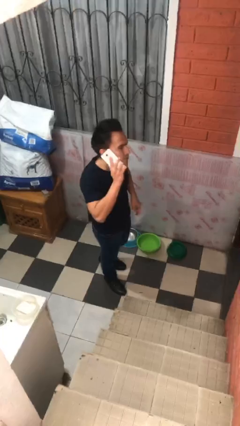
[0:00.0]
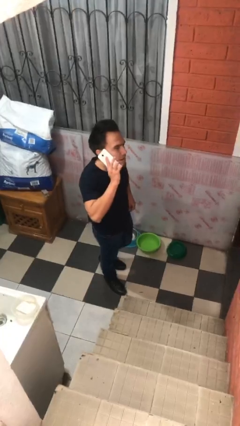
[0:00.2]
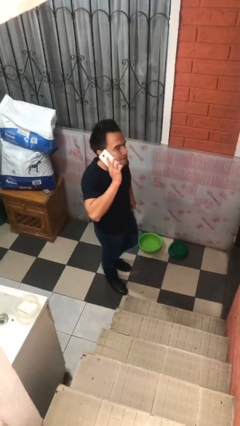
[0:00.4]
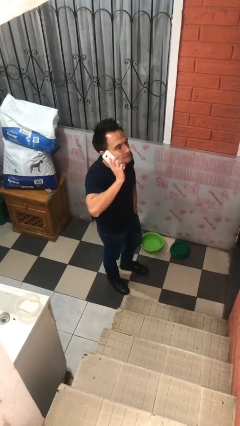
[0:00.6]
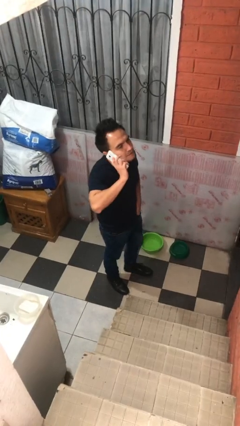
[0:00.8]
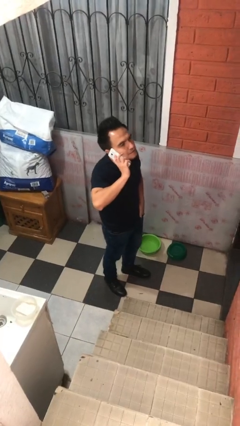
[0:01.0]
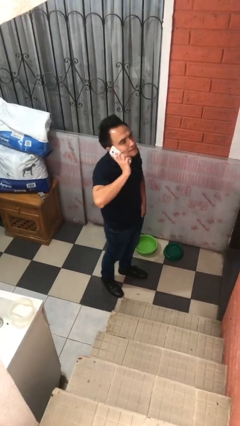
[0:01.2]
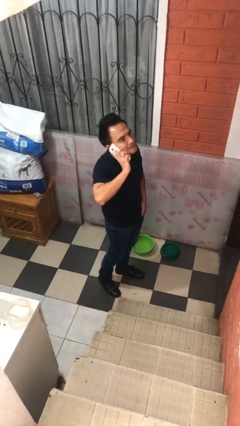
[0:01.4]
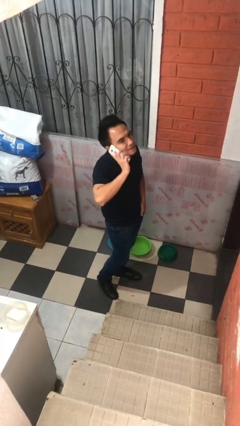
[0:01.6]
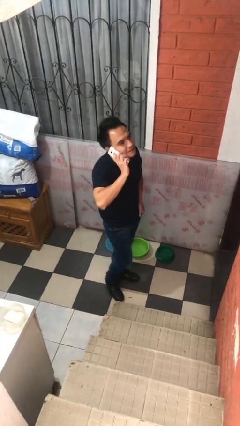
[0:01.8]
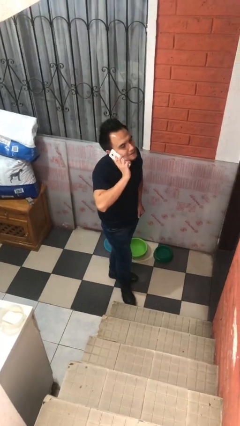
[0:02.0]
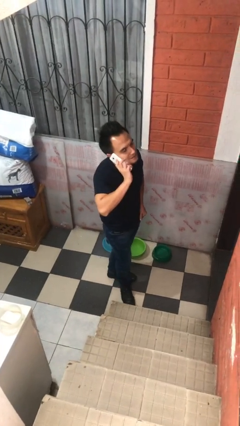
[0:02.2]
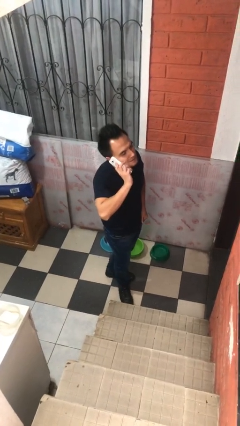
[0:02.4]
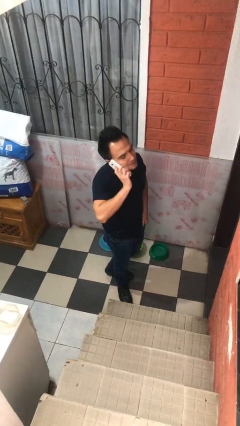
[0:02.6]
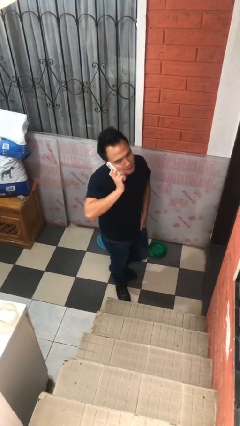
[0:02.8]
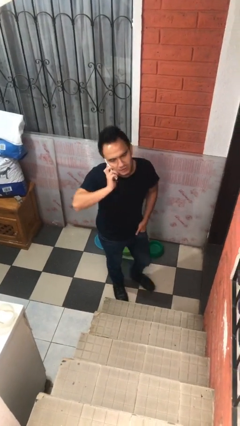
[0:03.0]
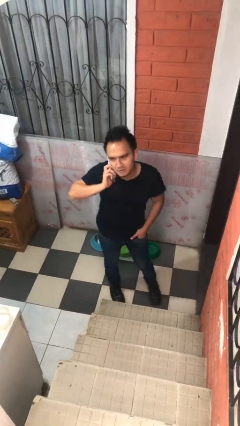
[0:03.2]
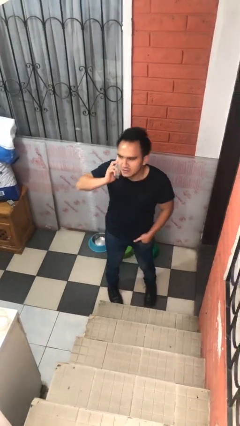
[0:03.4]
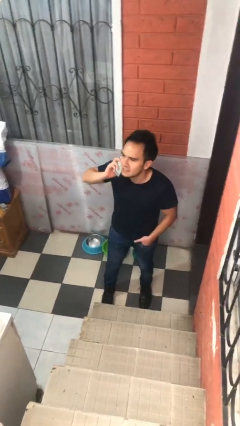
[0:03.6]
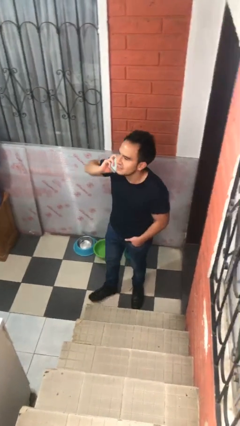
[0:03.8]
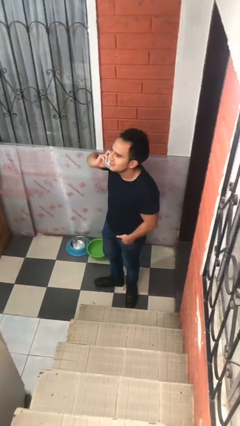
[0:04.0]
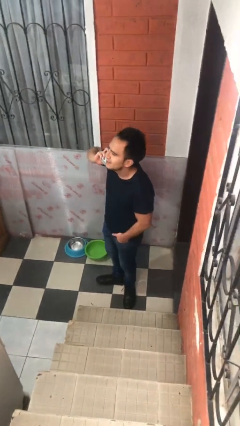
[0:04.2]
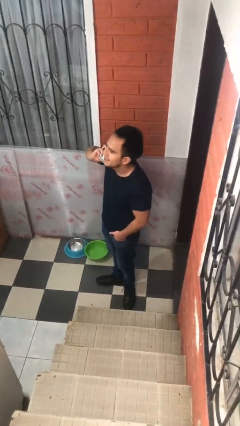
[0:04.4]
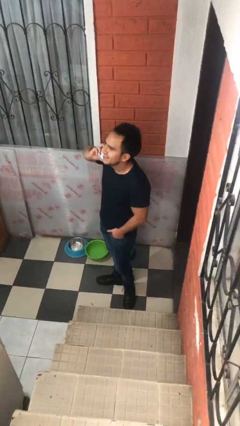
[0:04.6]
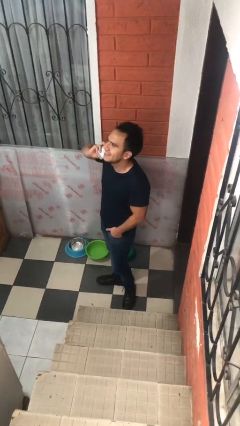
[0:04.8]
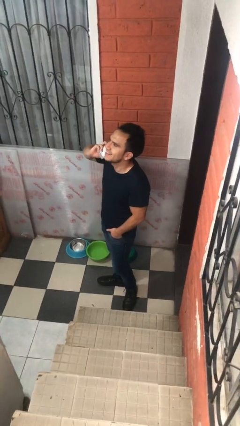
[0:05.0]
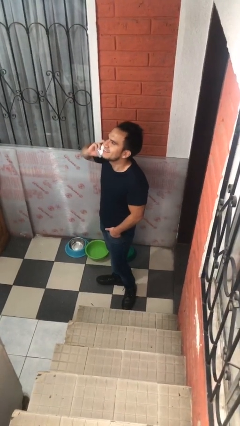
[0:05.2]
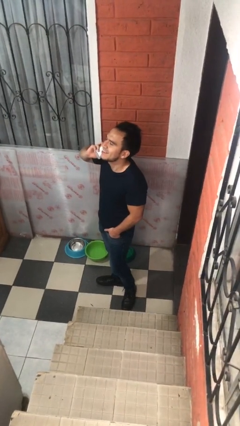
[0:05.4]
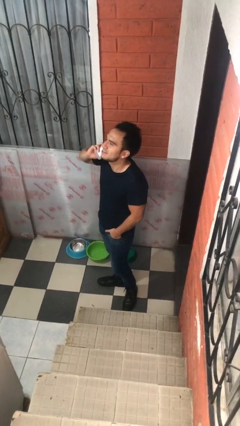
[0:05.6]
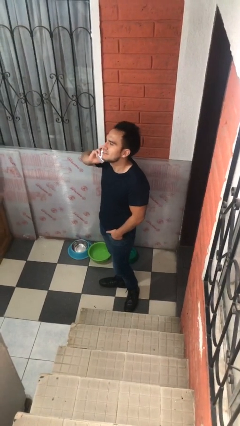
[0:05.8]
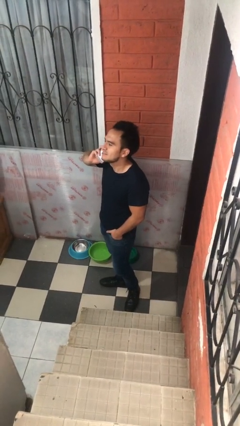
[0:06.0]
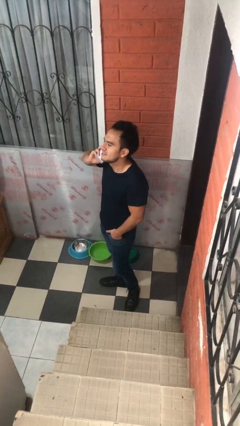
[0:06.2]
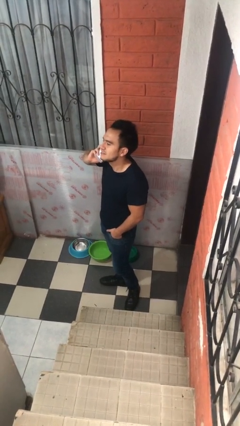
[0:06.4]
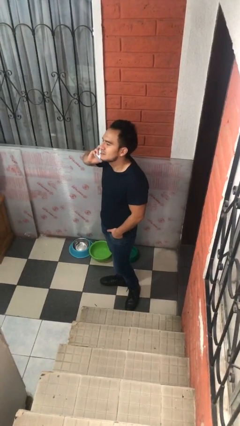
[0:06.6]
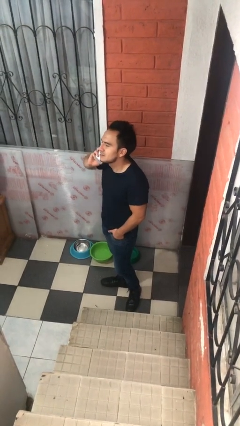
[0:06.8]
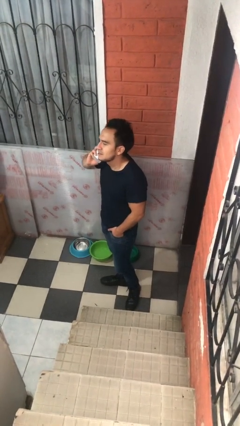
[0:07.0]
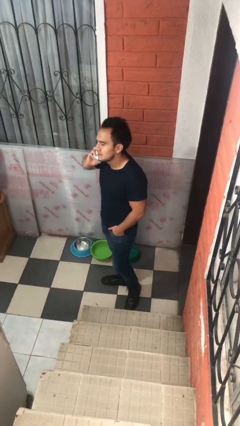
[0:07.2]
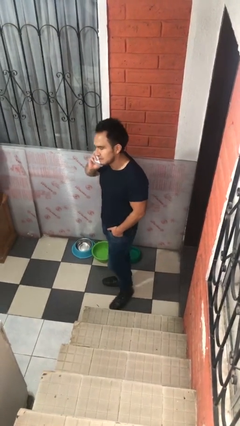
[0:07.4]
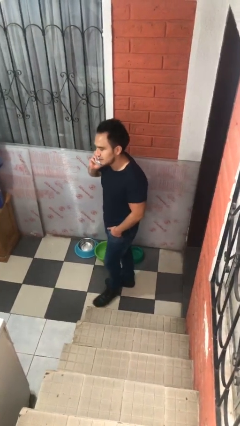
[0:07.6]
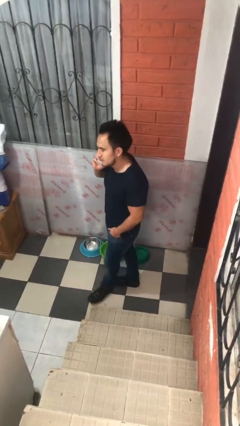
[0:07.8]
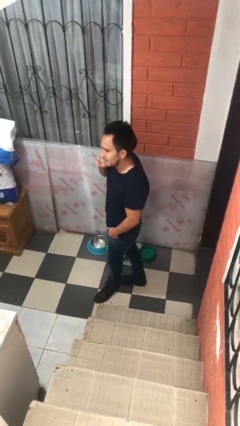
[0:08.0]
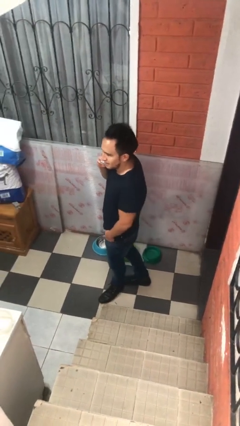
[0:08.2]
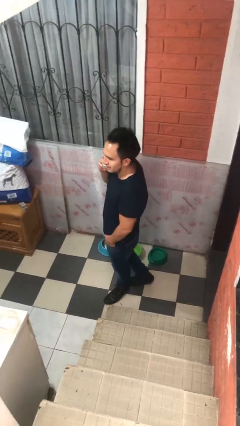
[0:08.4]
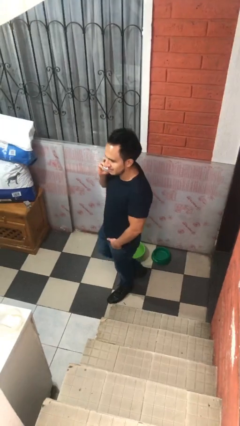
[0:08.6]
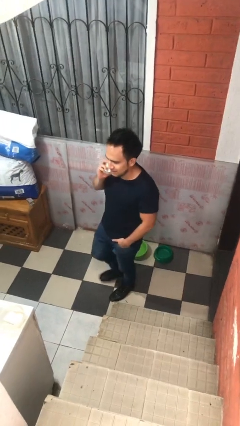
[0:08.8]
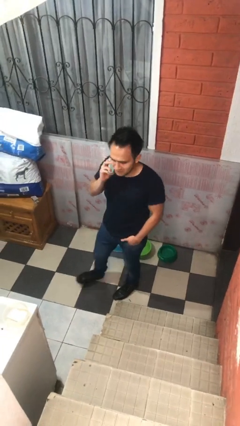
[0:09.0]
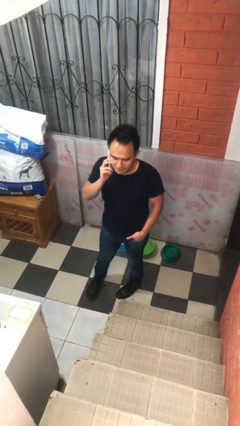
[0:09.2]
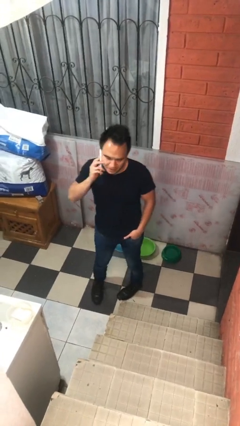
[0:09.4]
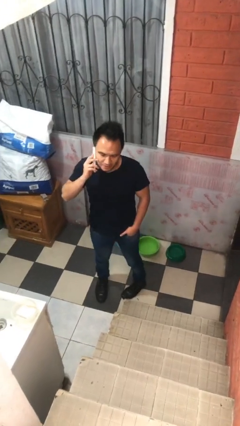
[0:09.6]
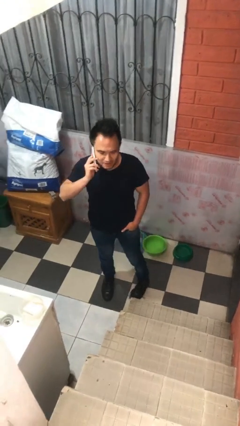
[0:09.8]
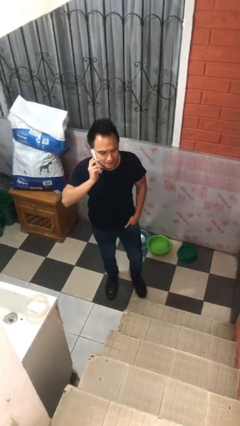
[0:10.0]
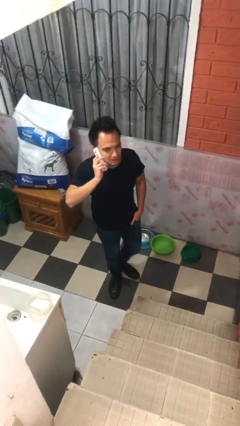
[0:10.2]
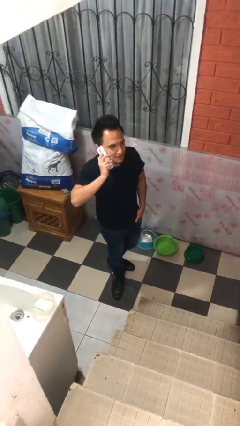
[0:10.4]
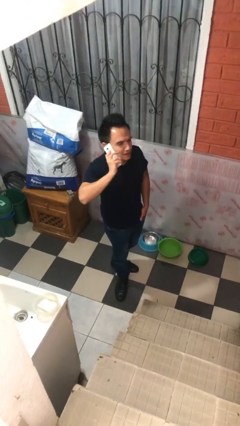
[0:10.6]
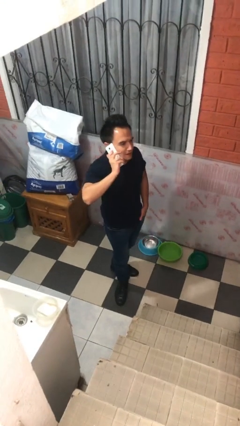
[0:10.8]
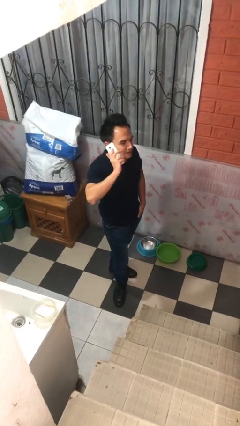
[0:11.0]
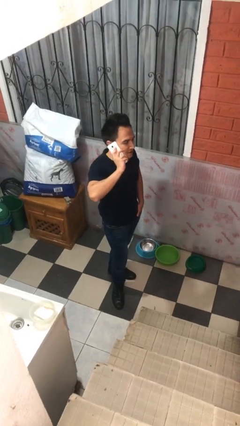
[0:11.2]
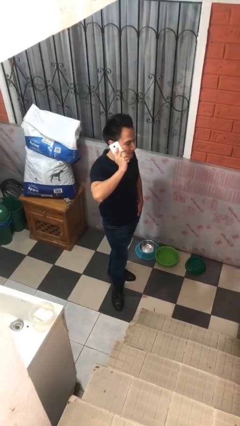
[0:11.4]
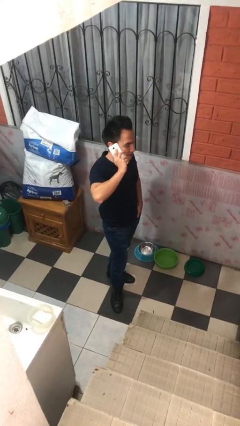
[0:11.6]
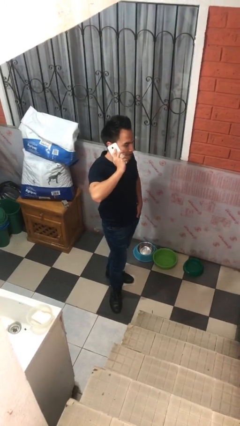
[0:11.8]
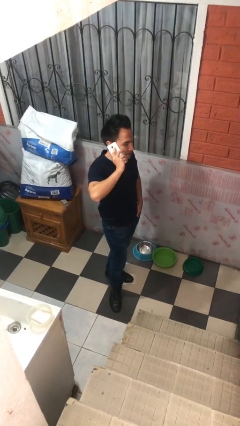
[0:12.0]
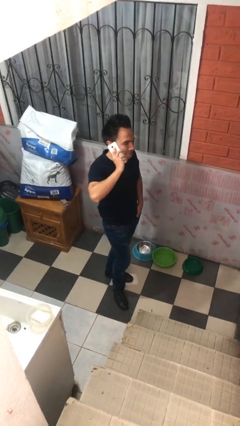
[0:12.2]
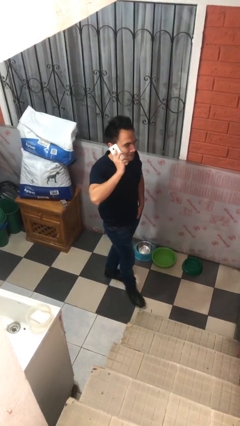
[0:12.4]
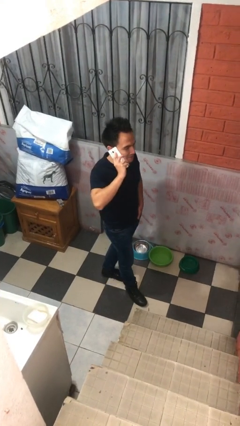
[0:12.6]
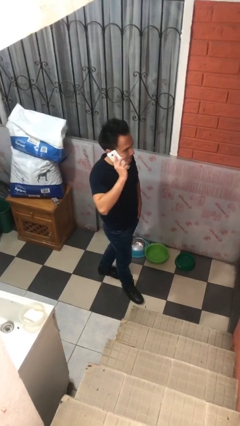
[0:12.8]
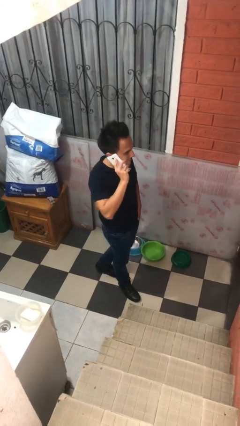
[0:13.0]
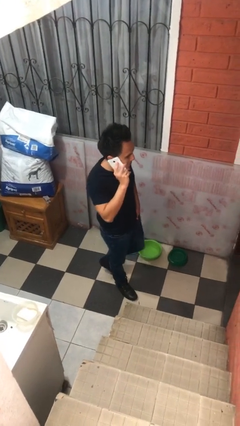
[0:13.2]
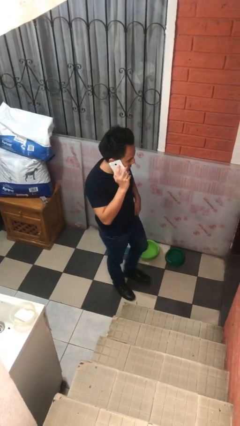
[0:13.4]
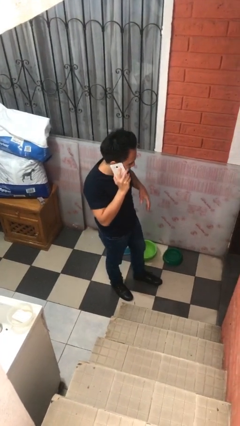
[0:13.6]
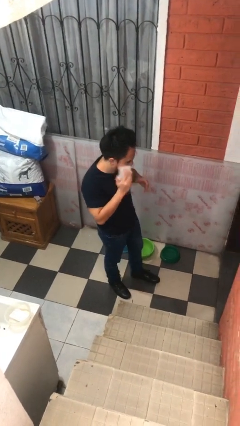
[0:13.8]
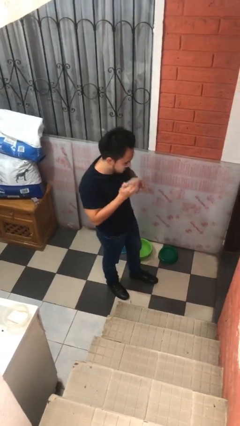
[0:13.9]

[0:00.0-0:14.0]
person talks on phone

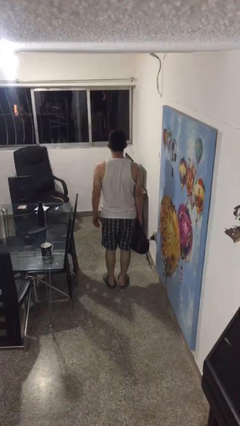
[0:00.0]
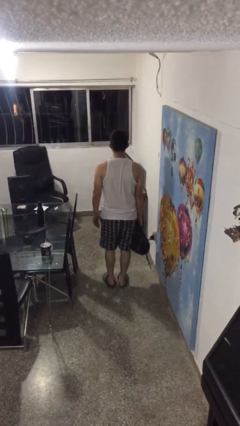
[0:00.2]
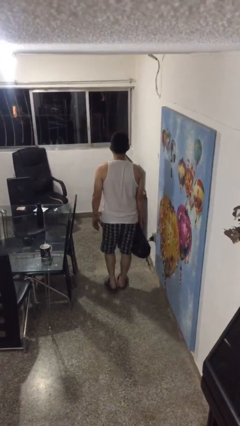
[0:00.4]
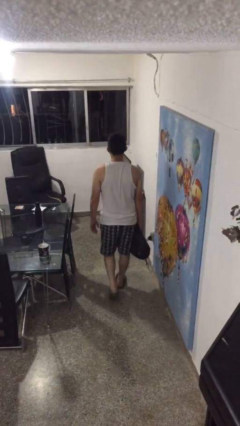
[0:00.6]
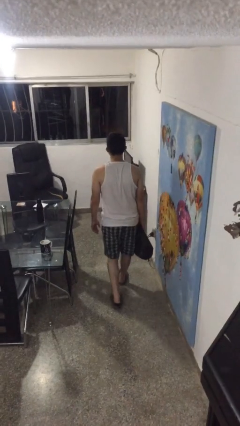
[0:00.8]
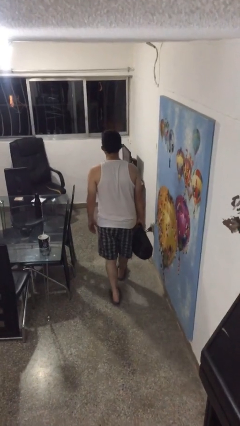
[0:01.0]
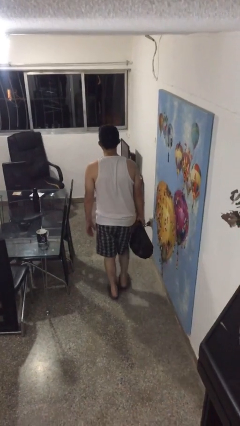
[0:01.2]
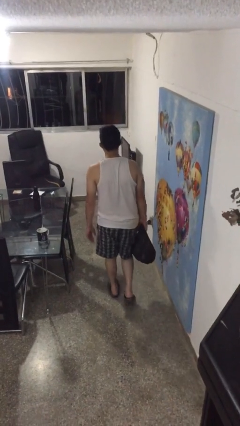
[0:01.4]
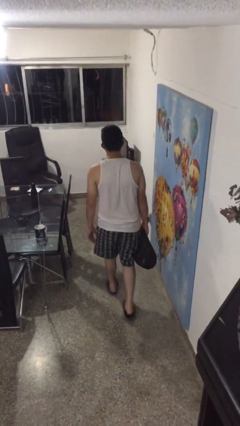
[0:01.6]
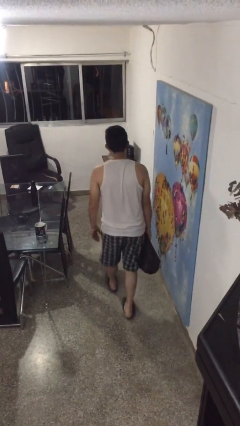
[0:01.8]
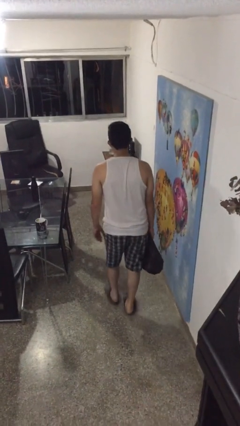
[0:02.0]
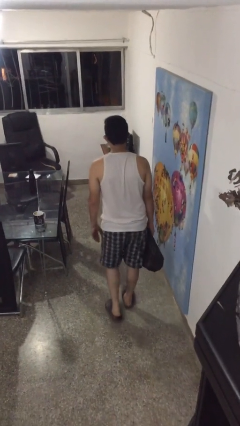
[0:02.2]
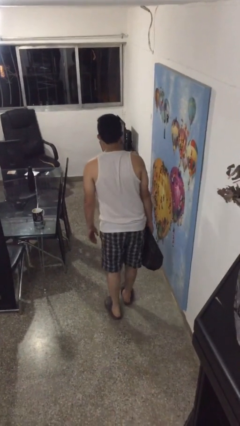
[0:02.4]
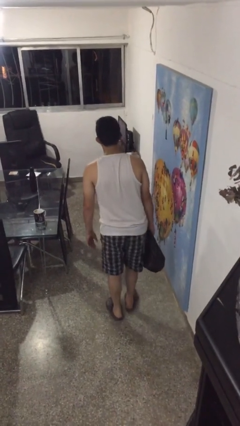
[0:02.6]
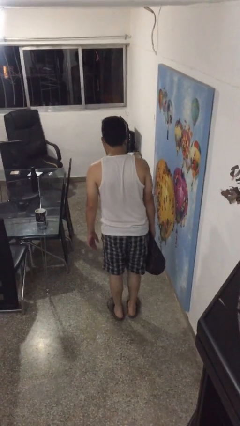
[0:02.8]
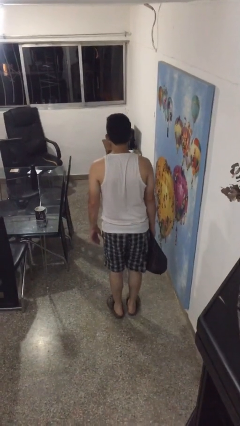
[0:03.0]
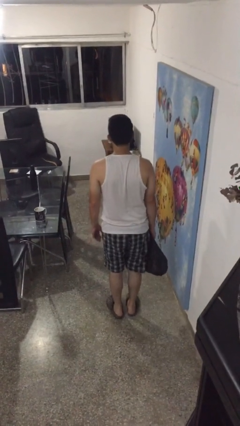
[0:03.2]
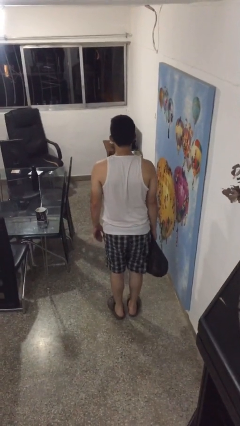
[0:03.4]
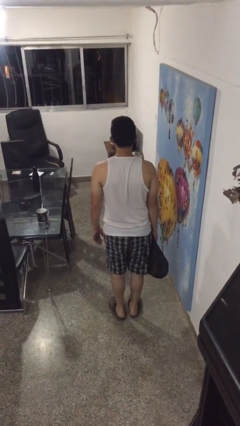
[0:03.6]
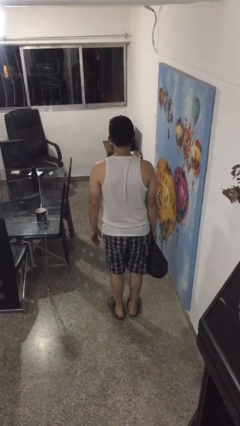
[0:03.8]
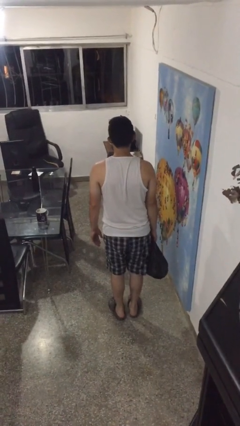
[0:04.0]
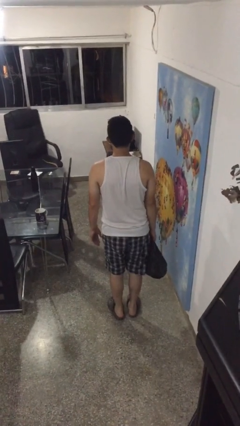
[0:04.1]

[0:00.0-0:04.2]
person carries groceries
